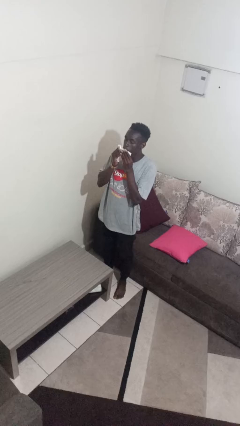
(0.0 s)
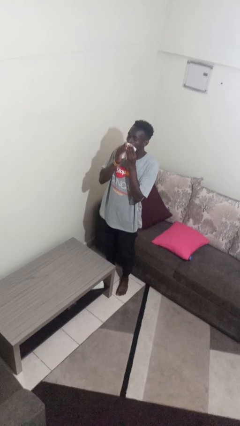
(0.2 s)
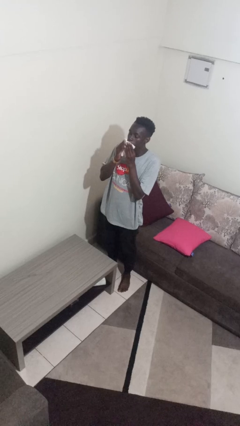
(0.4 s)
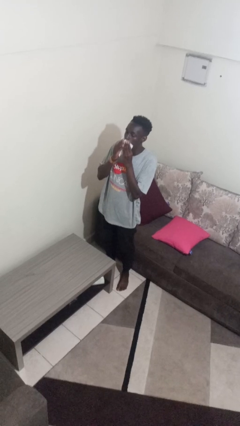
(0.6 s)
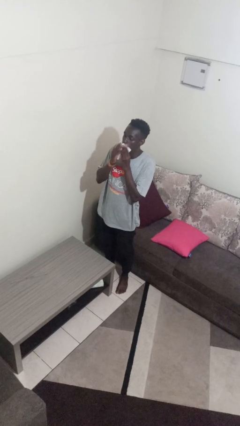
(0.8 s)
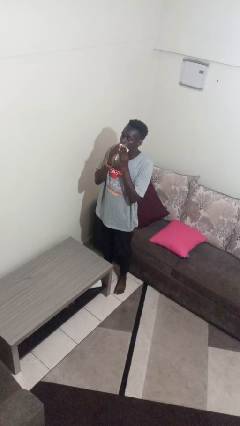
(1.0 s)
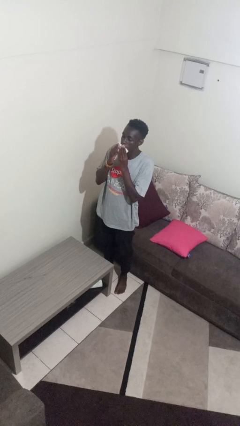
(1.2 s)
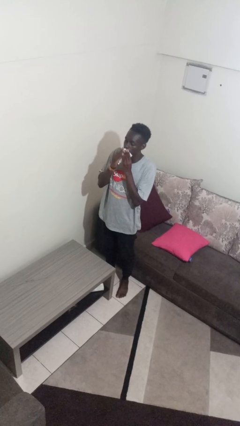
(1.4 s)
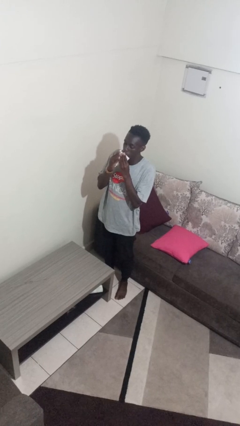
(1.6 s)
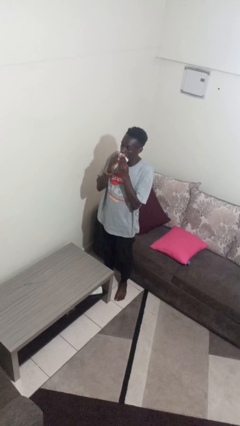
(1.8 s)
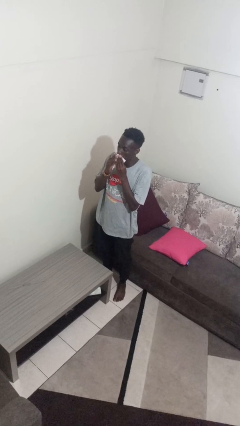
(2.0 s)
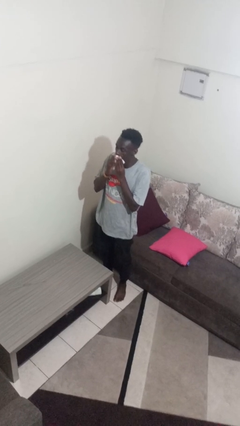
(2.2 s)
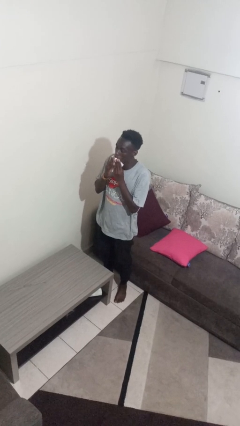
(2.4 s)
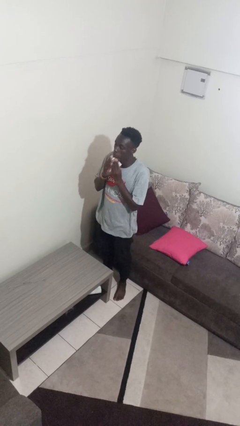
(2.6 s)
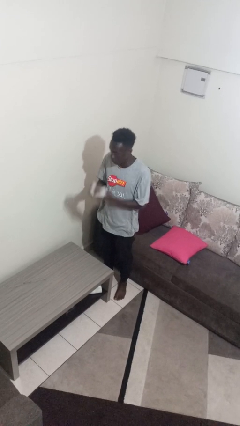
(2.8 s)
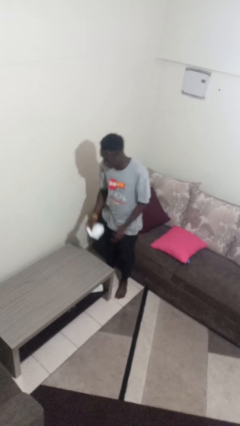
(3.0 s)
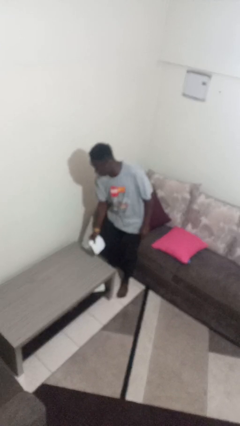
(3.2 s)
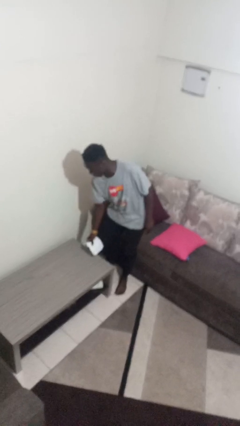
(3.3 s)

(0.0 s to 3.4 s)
person wipes mouth with napkin

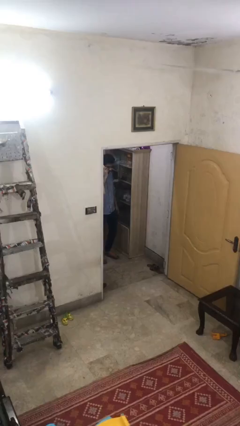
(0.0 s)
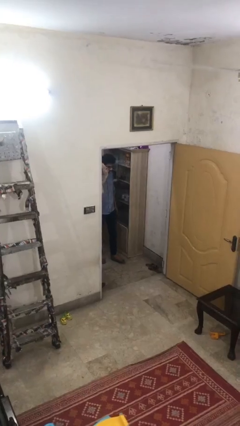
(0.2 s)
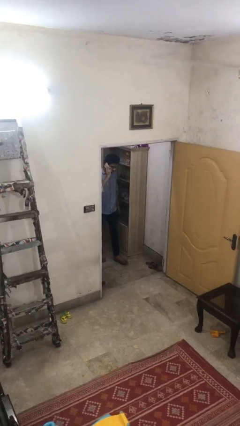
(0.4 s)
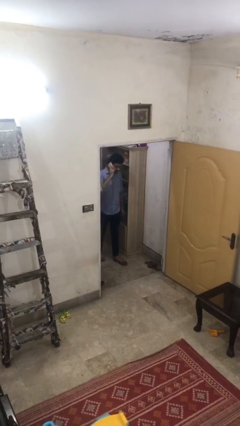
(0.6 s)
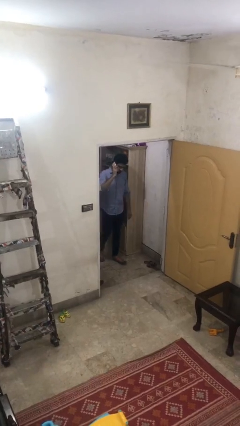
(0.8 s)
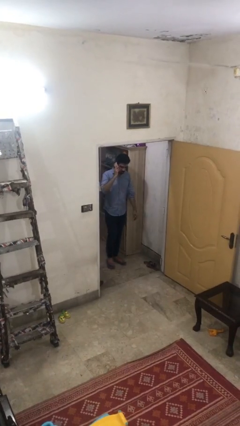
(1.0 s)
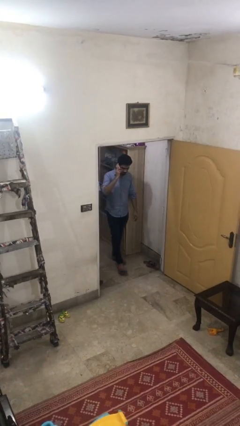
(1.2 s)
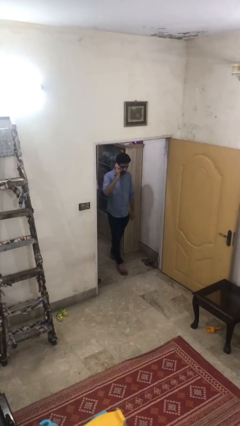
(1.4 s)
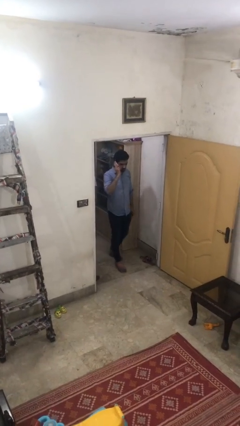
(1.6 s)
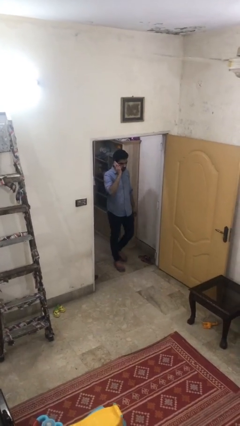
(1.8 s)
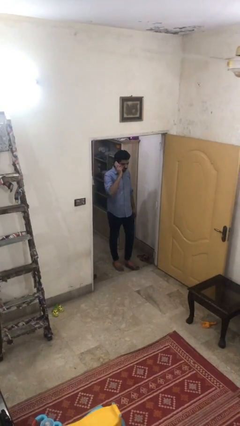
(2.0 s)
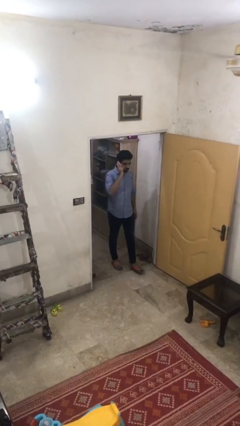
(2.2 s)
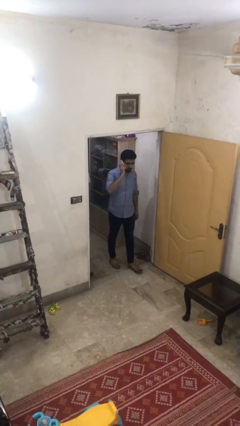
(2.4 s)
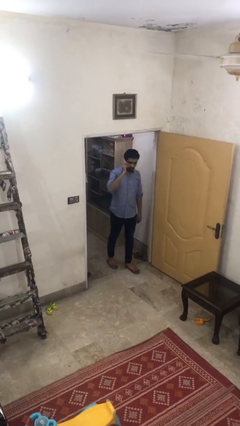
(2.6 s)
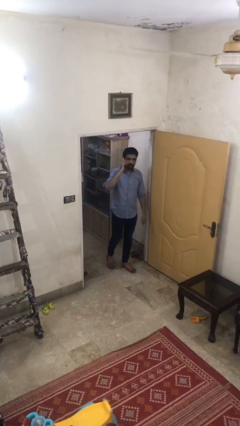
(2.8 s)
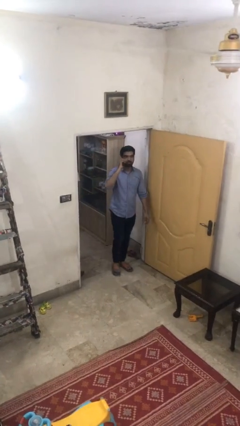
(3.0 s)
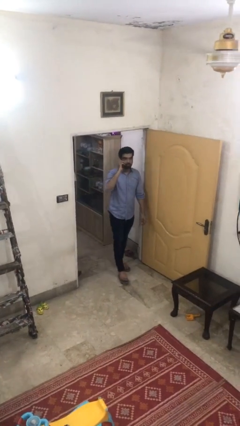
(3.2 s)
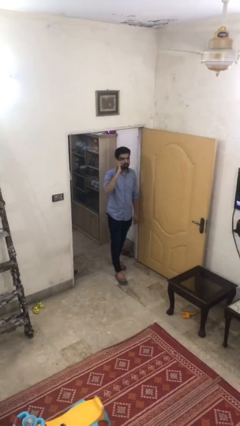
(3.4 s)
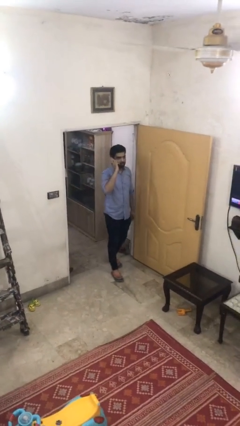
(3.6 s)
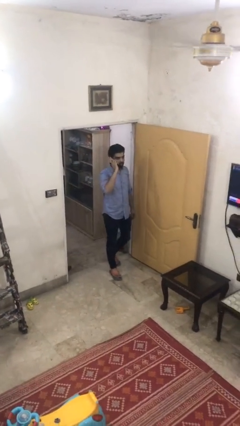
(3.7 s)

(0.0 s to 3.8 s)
person enters scene through structure

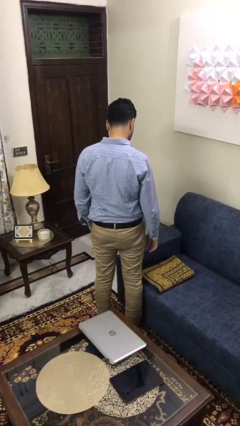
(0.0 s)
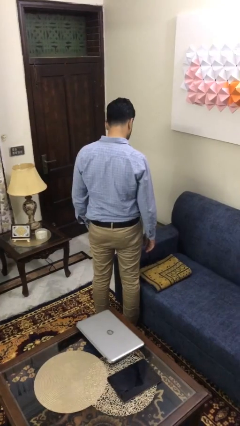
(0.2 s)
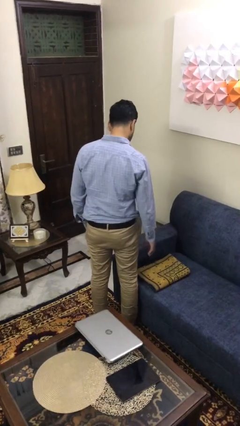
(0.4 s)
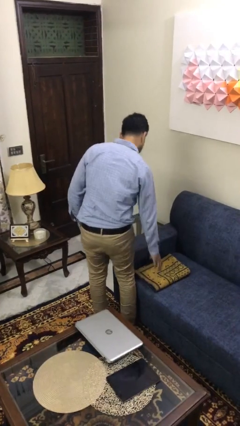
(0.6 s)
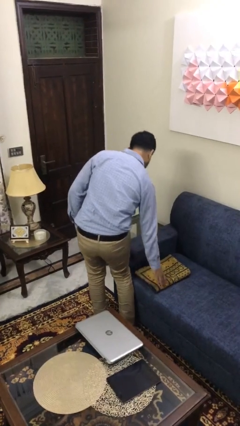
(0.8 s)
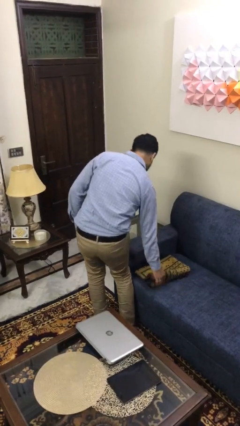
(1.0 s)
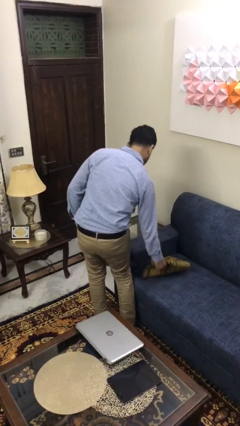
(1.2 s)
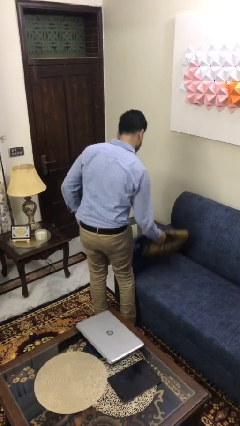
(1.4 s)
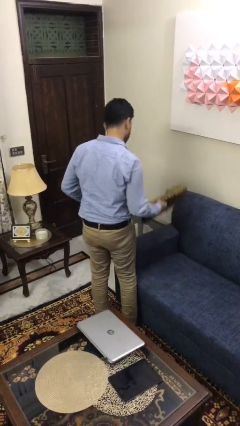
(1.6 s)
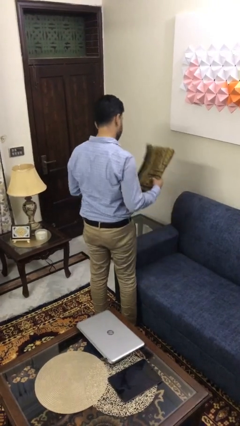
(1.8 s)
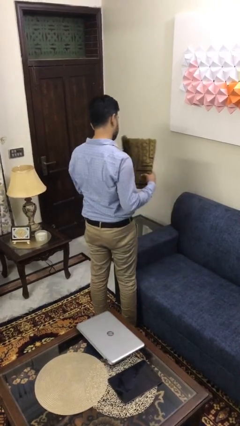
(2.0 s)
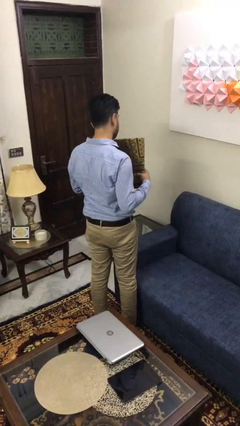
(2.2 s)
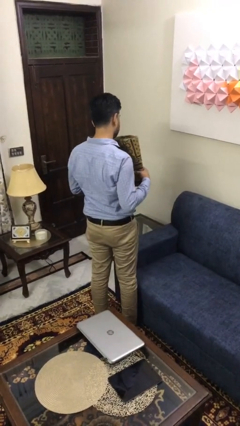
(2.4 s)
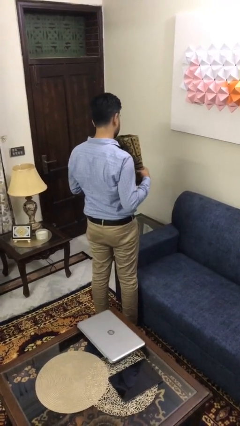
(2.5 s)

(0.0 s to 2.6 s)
person picks up object from couch

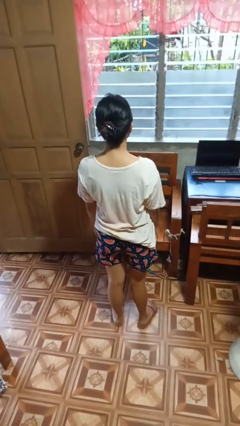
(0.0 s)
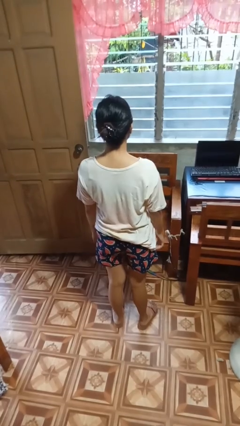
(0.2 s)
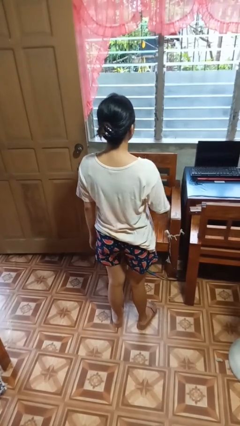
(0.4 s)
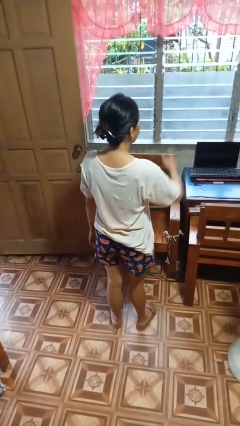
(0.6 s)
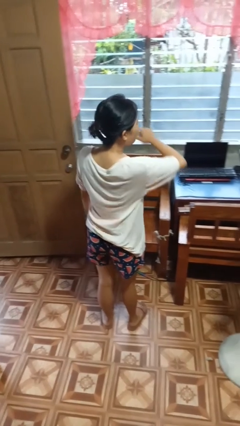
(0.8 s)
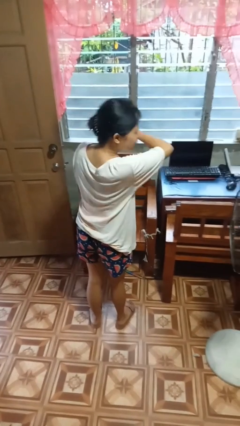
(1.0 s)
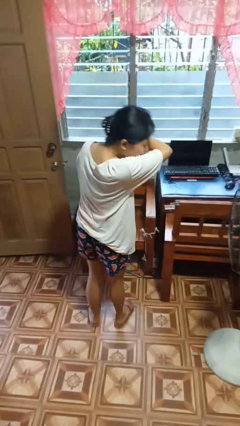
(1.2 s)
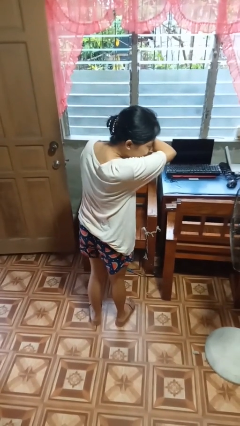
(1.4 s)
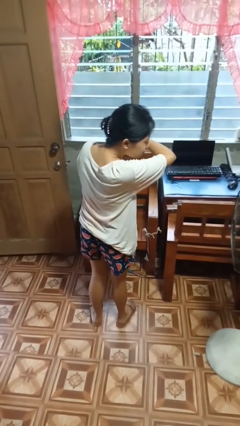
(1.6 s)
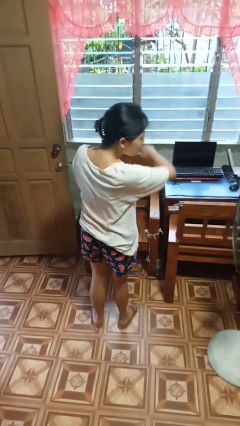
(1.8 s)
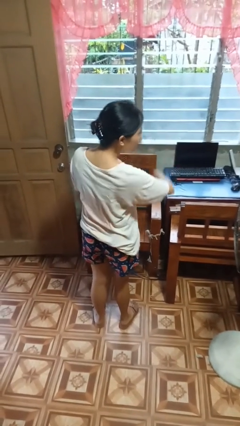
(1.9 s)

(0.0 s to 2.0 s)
person sneezes into arm

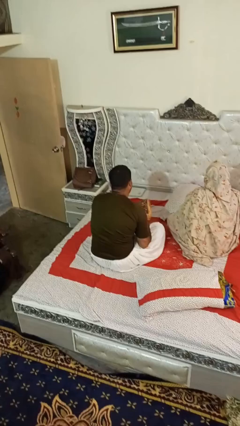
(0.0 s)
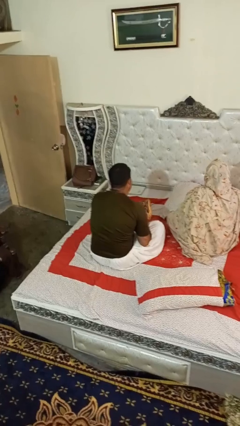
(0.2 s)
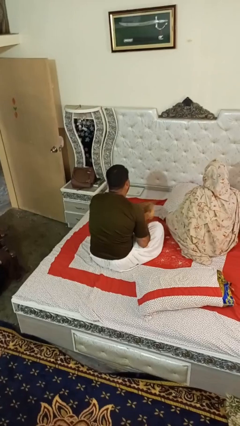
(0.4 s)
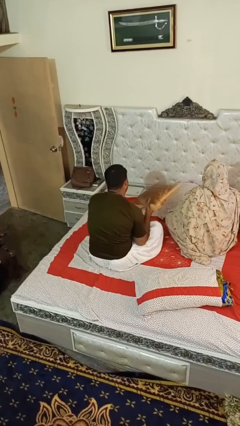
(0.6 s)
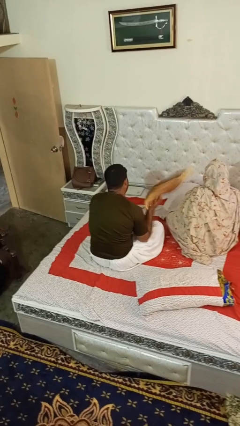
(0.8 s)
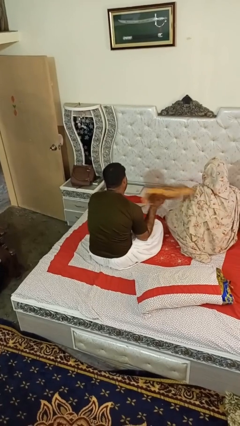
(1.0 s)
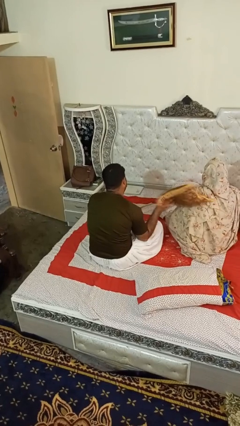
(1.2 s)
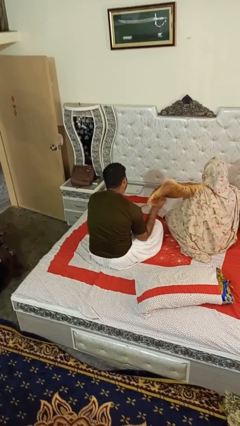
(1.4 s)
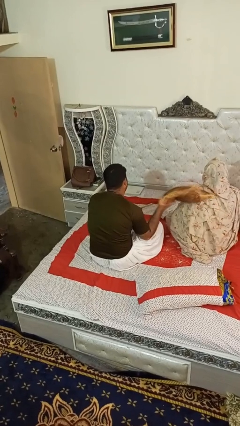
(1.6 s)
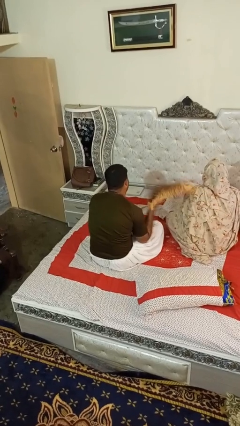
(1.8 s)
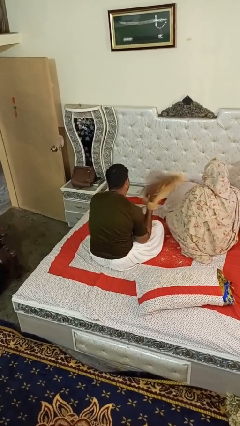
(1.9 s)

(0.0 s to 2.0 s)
person hits person with pillow

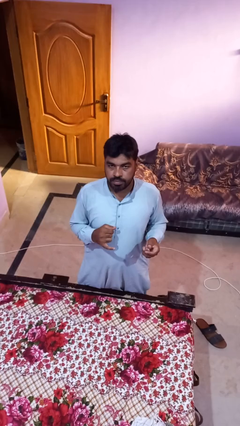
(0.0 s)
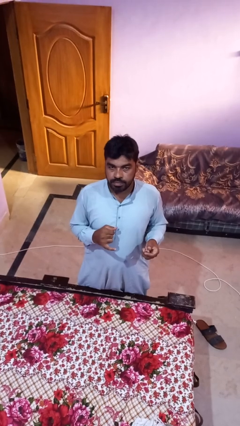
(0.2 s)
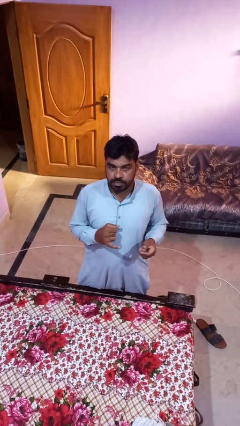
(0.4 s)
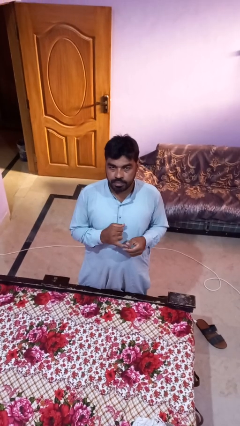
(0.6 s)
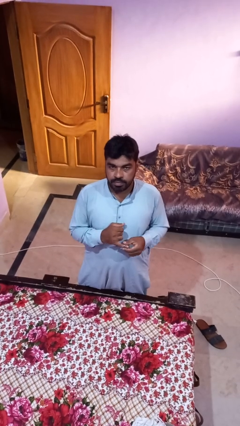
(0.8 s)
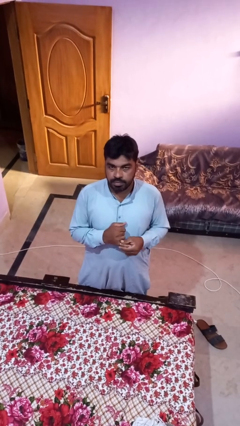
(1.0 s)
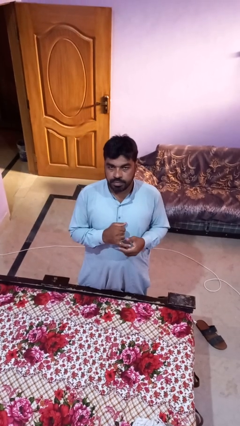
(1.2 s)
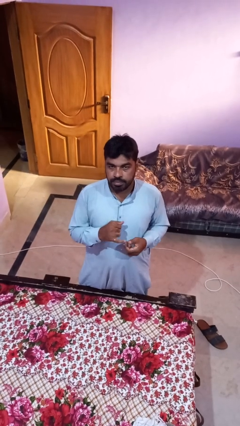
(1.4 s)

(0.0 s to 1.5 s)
person puts on ring

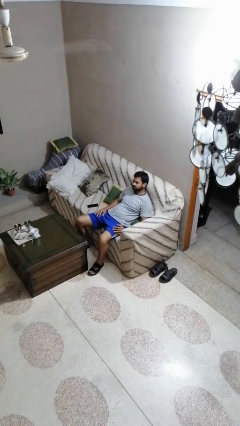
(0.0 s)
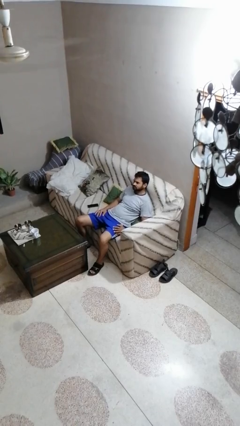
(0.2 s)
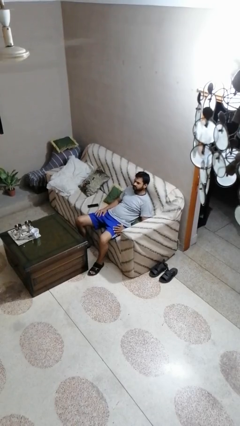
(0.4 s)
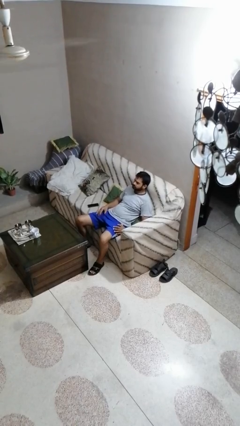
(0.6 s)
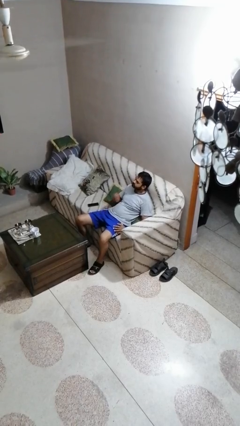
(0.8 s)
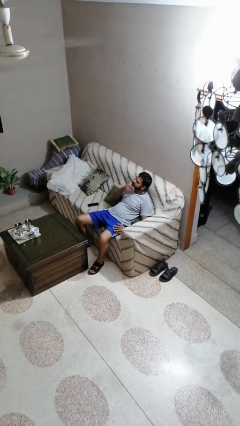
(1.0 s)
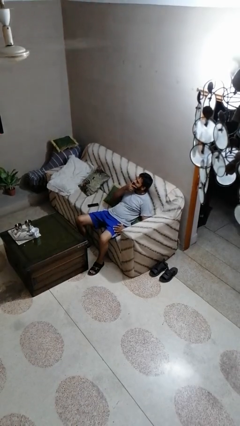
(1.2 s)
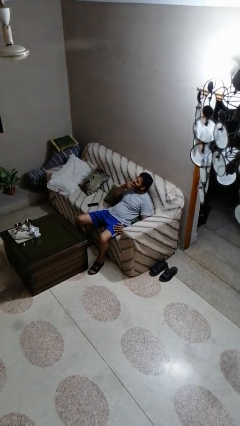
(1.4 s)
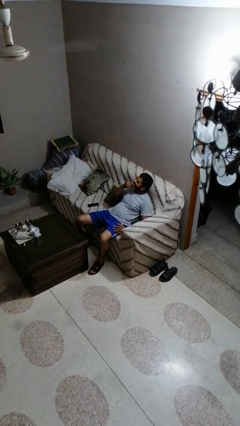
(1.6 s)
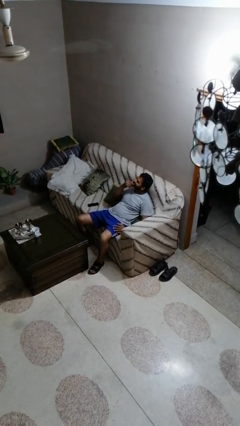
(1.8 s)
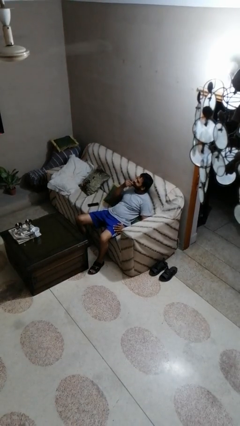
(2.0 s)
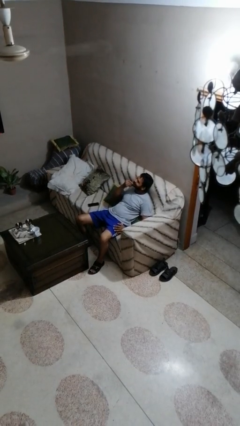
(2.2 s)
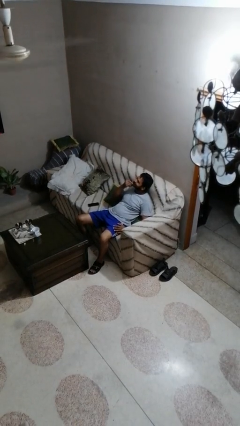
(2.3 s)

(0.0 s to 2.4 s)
person strokes chin
